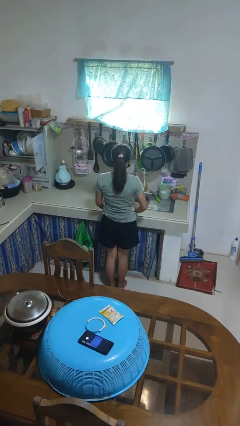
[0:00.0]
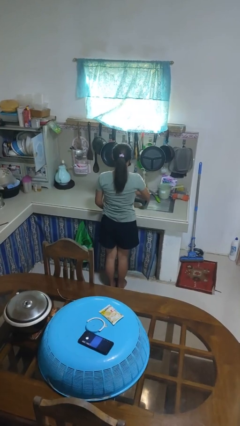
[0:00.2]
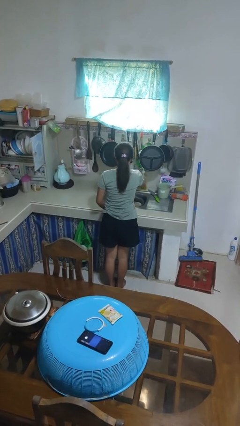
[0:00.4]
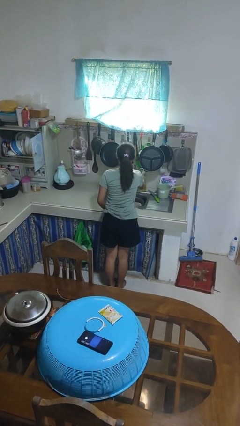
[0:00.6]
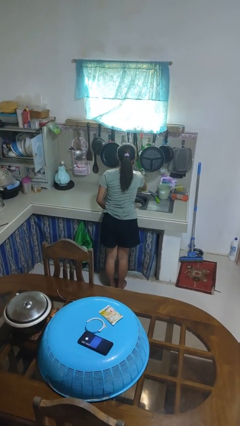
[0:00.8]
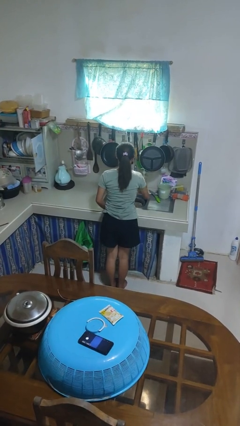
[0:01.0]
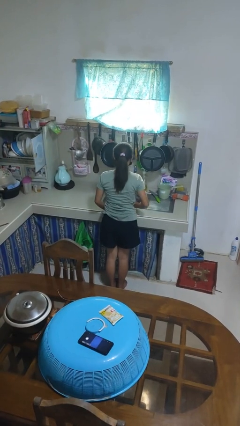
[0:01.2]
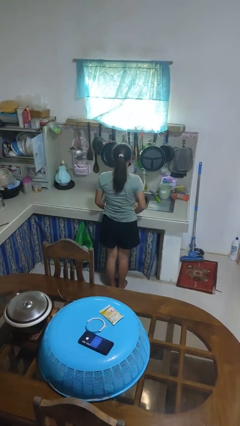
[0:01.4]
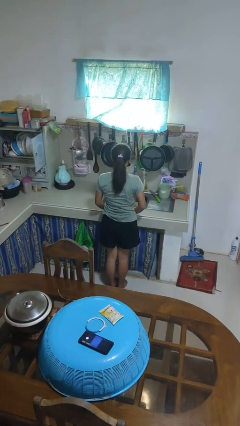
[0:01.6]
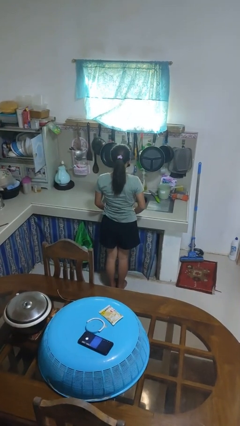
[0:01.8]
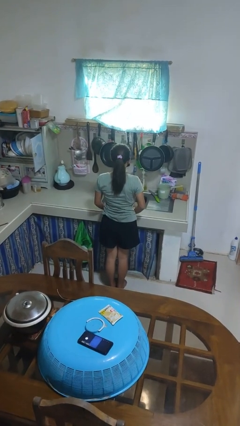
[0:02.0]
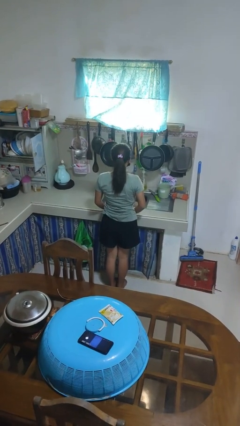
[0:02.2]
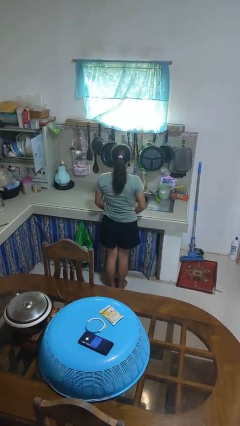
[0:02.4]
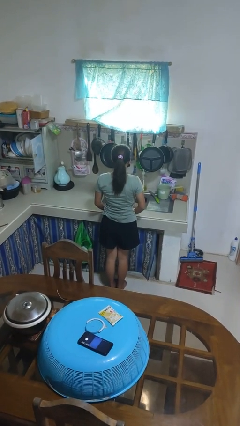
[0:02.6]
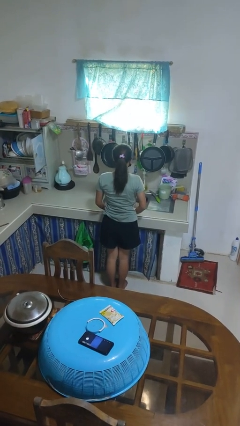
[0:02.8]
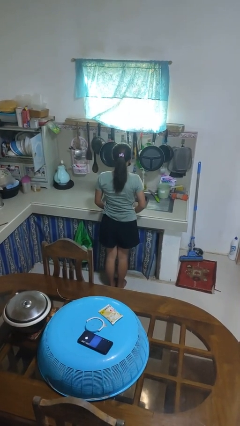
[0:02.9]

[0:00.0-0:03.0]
person turns on faucet

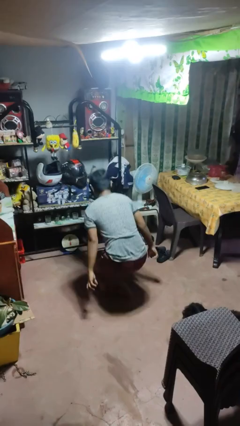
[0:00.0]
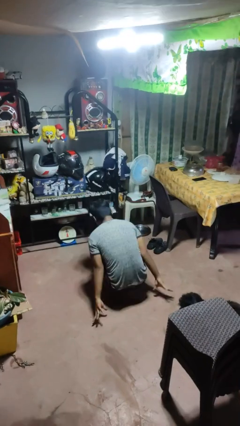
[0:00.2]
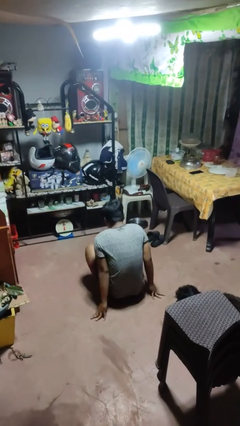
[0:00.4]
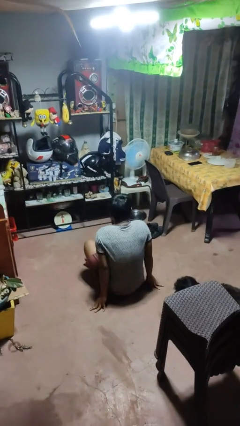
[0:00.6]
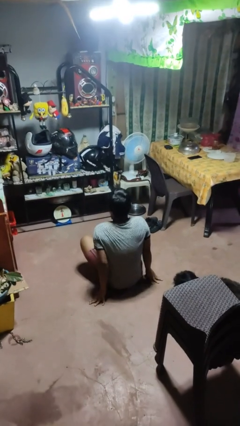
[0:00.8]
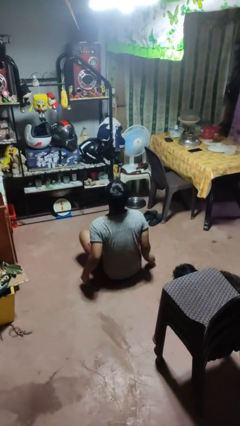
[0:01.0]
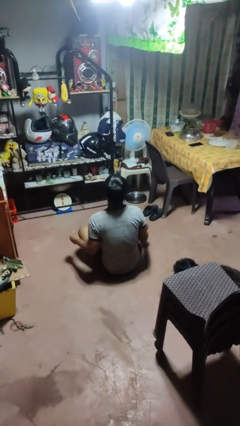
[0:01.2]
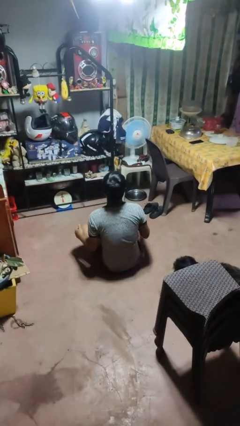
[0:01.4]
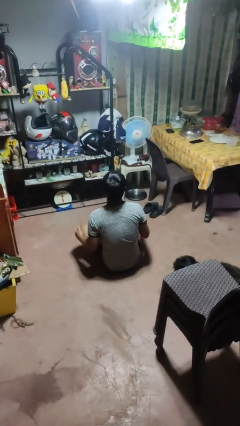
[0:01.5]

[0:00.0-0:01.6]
person sits crisscross

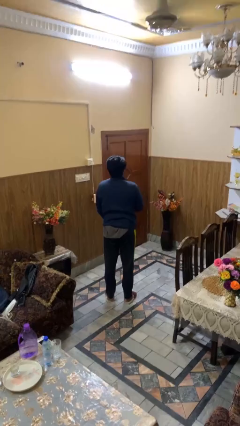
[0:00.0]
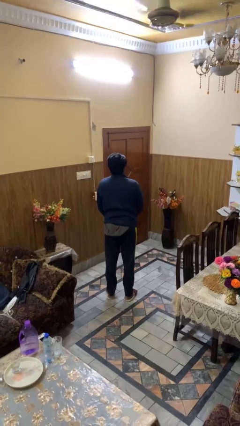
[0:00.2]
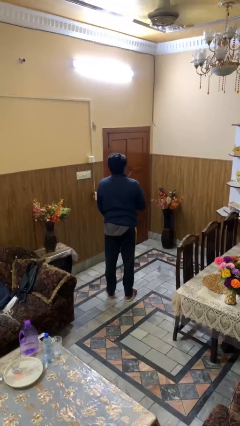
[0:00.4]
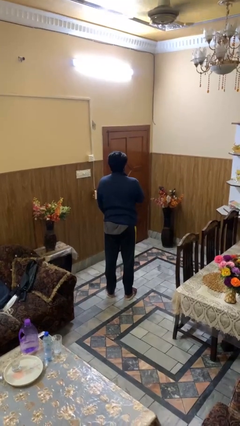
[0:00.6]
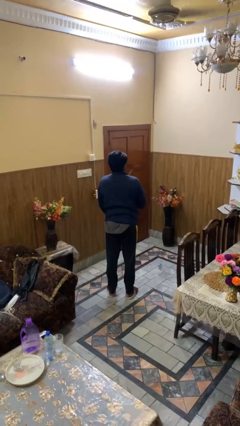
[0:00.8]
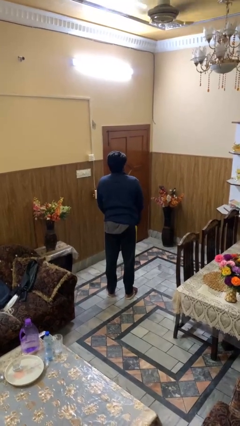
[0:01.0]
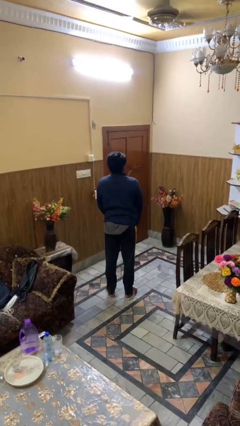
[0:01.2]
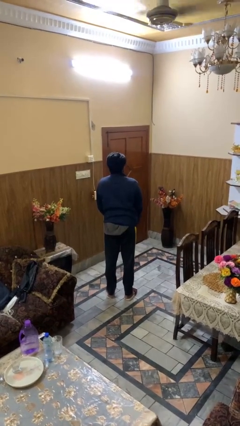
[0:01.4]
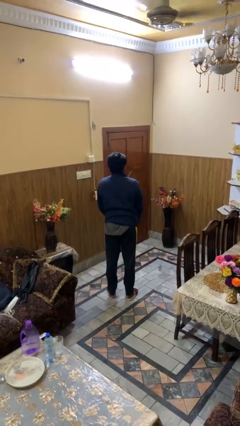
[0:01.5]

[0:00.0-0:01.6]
person unzips jacket

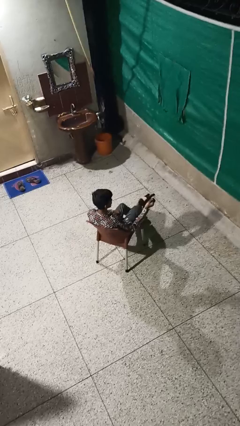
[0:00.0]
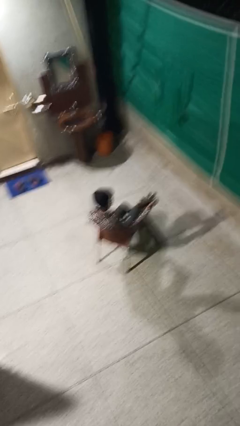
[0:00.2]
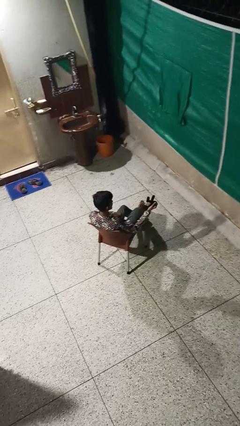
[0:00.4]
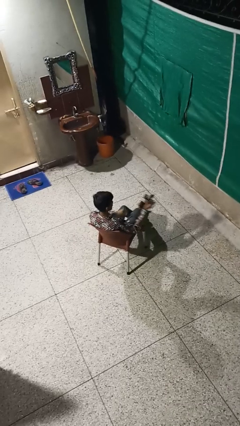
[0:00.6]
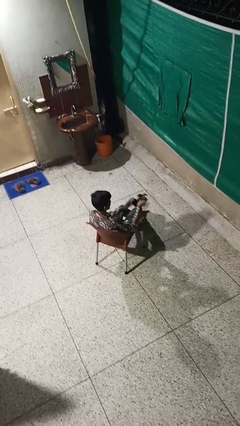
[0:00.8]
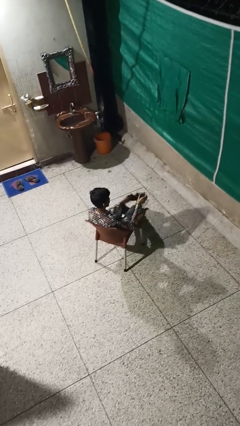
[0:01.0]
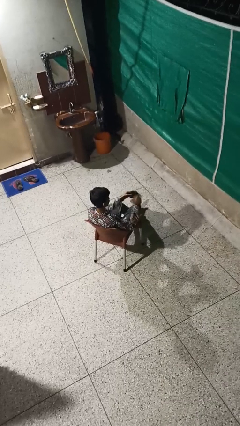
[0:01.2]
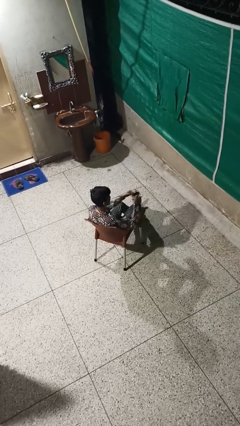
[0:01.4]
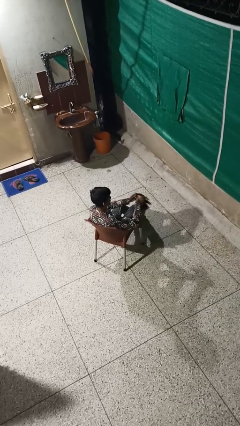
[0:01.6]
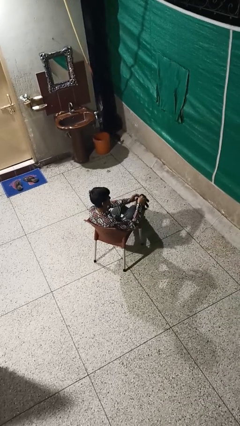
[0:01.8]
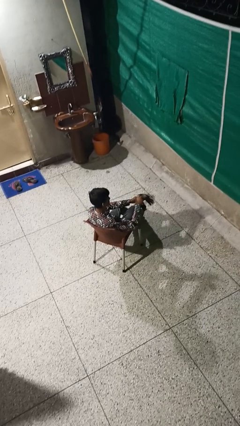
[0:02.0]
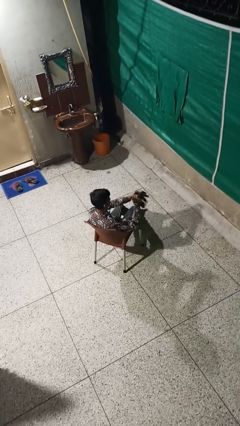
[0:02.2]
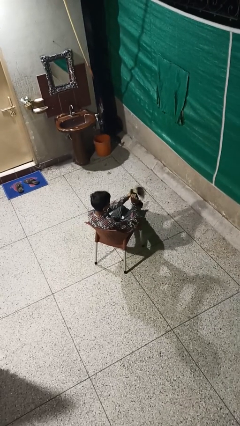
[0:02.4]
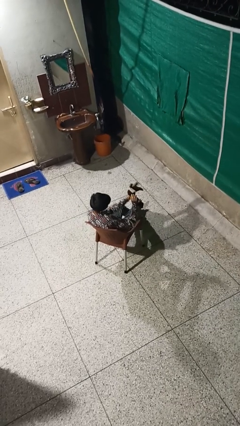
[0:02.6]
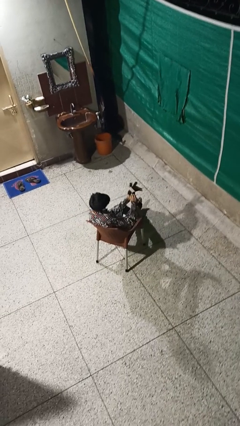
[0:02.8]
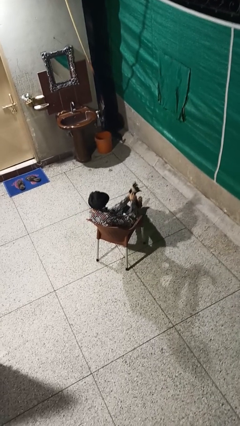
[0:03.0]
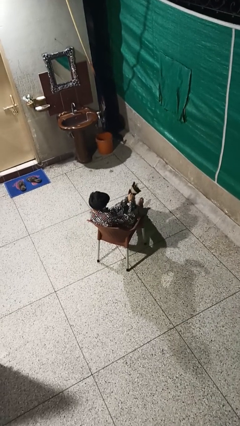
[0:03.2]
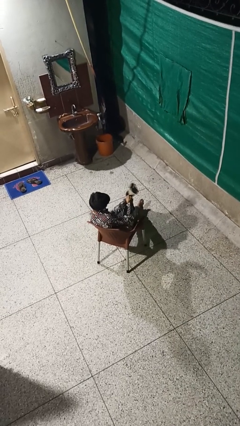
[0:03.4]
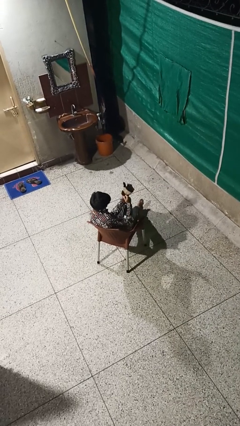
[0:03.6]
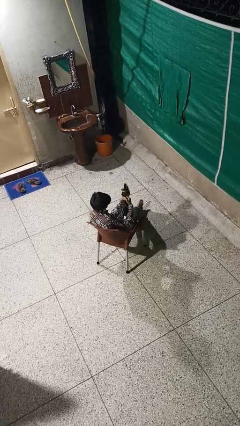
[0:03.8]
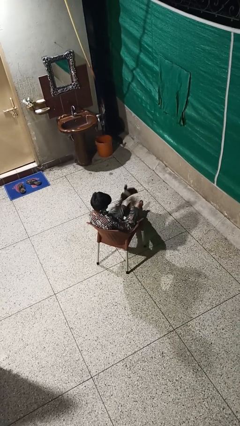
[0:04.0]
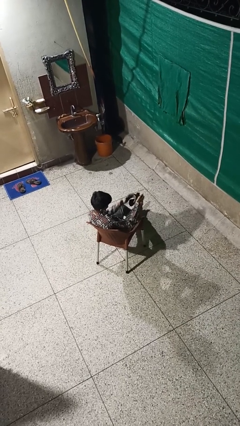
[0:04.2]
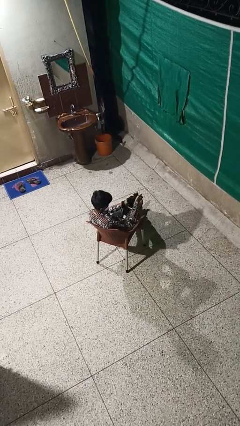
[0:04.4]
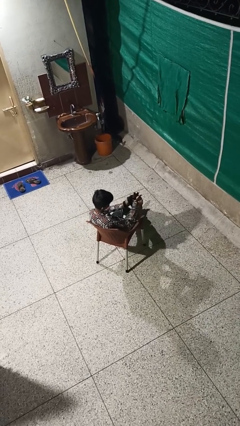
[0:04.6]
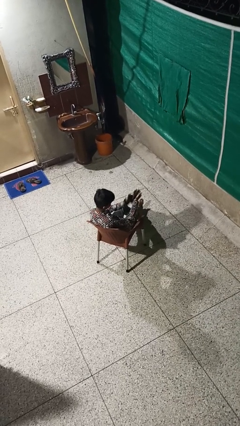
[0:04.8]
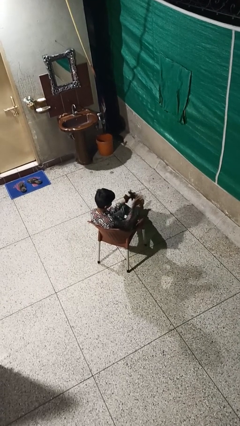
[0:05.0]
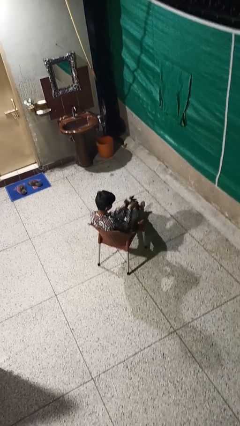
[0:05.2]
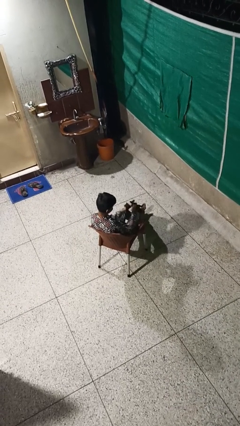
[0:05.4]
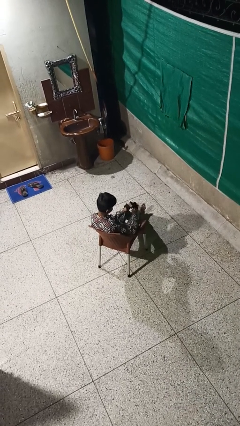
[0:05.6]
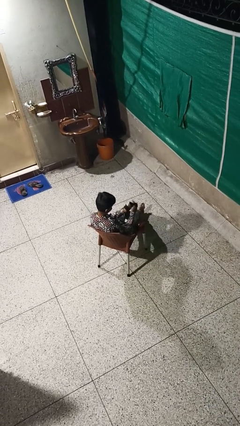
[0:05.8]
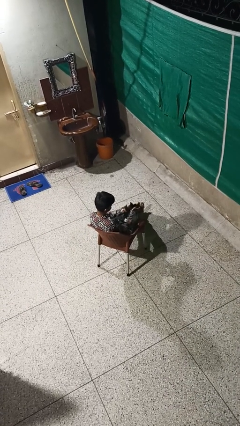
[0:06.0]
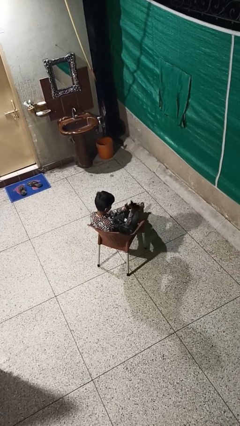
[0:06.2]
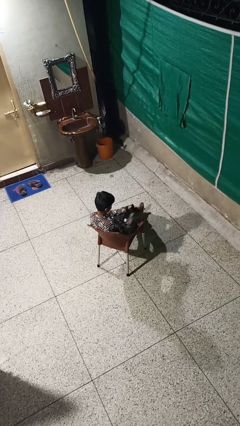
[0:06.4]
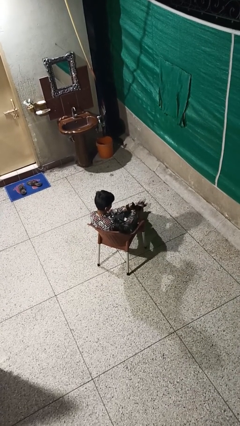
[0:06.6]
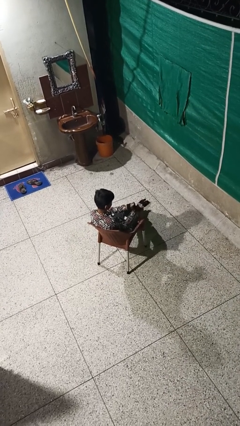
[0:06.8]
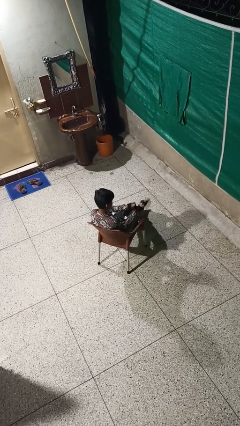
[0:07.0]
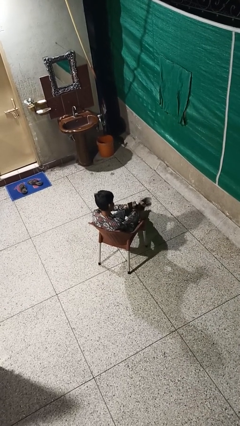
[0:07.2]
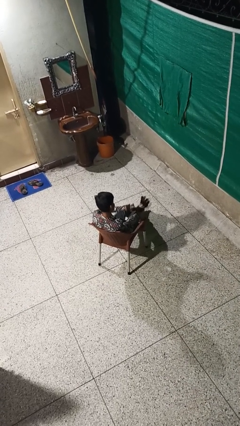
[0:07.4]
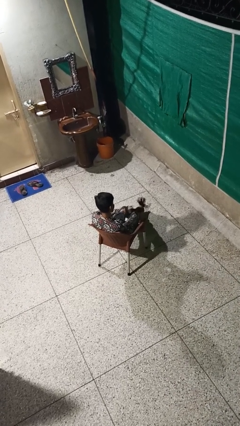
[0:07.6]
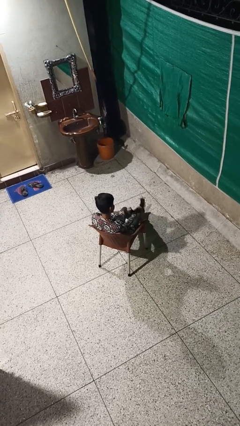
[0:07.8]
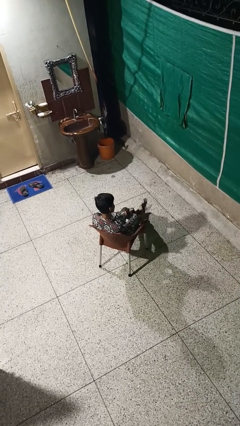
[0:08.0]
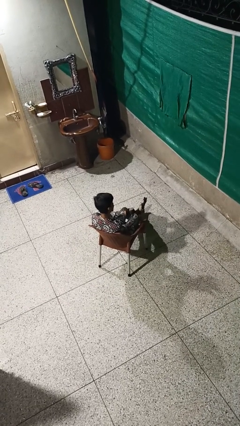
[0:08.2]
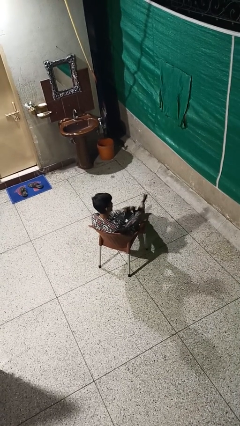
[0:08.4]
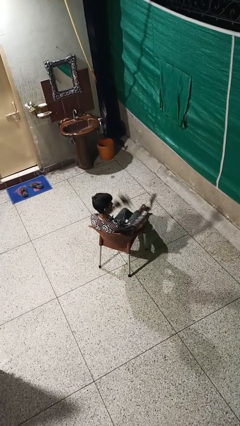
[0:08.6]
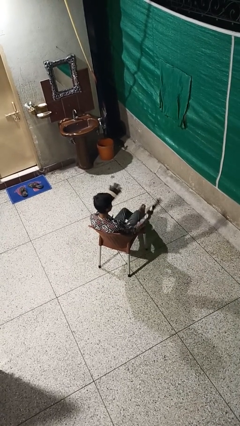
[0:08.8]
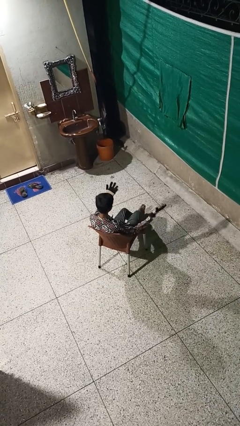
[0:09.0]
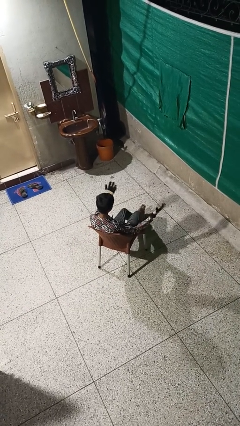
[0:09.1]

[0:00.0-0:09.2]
person puts on gloves

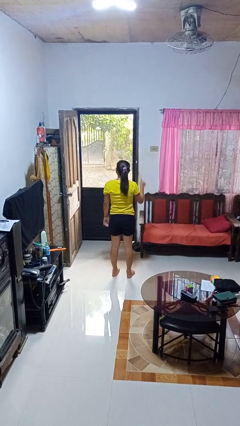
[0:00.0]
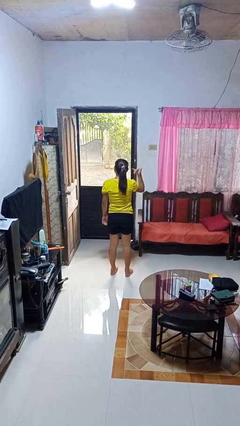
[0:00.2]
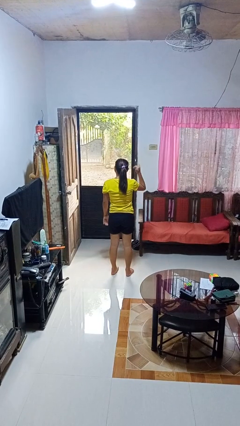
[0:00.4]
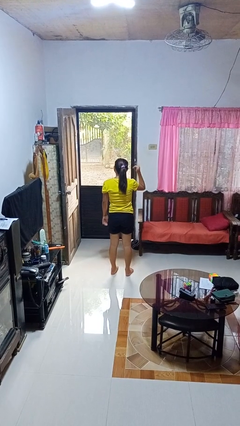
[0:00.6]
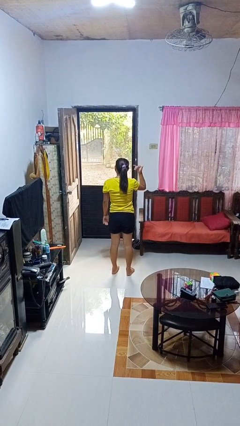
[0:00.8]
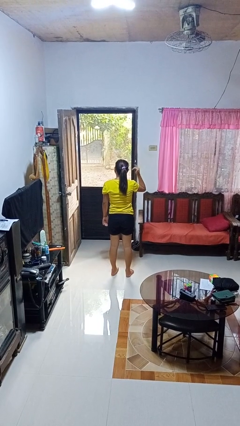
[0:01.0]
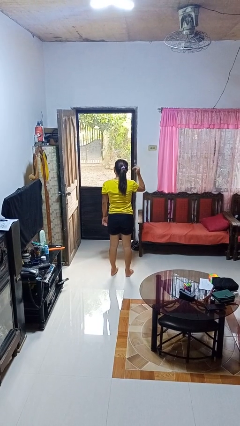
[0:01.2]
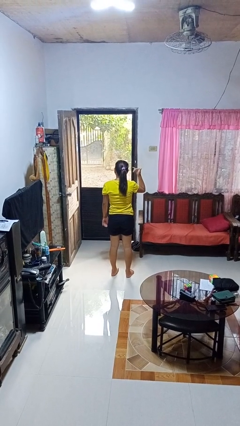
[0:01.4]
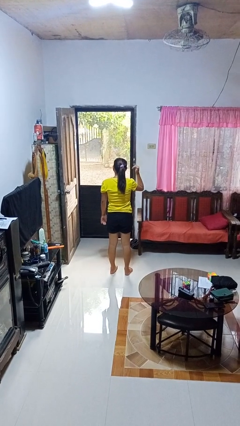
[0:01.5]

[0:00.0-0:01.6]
person gestures hang loose

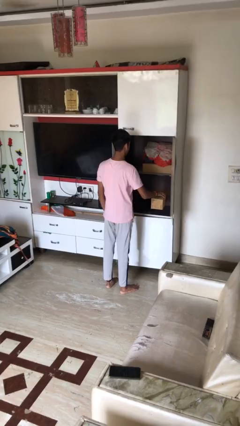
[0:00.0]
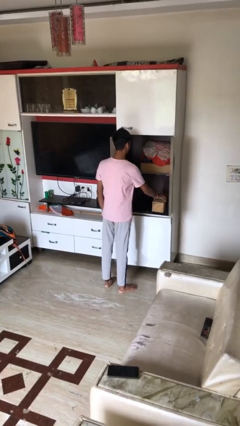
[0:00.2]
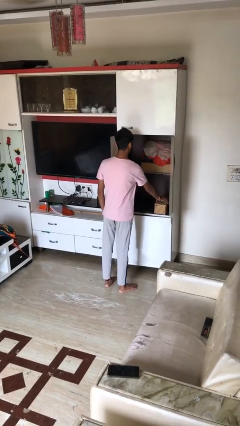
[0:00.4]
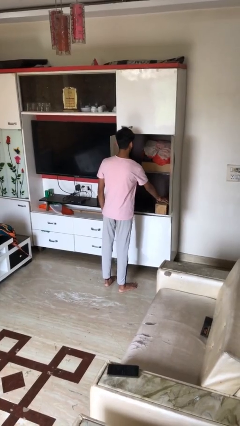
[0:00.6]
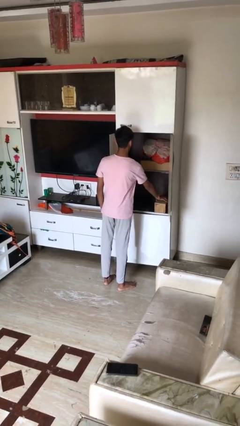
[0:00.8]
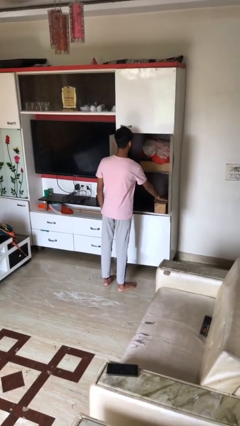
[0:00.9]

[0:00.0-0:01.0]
person puts down object into cabinet
